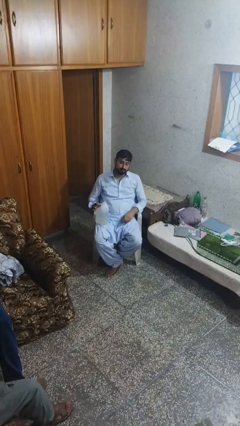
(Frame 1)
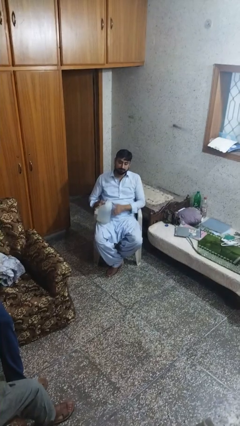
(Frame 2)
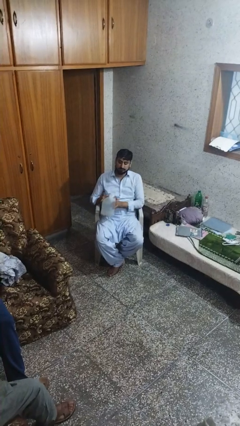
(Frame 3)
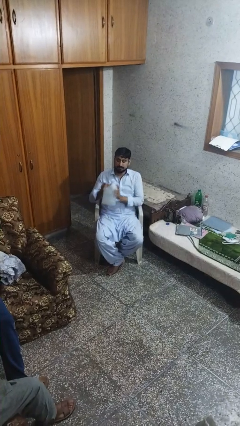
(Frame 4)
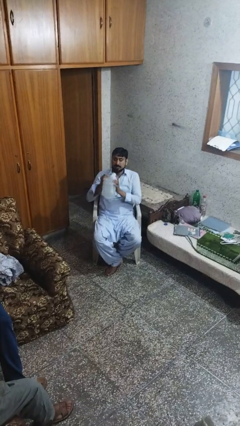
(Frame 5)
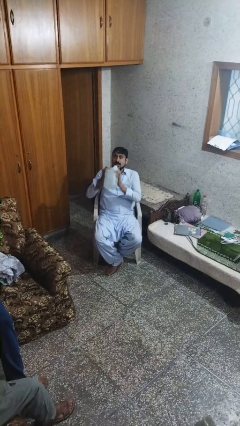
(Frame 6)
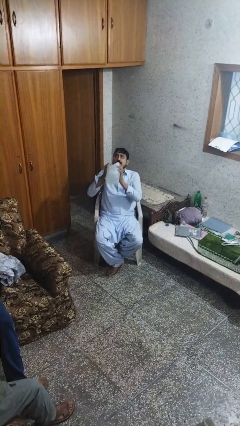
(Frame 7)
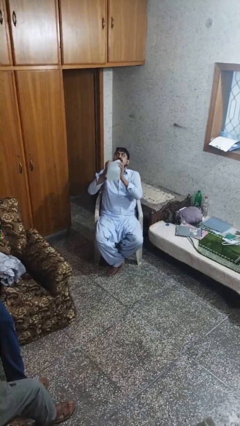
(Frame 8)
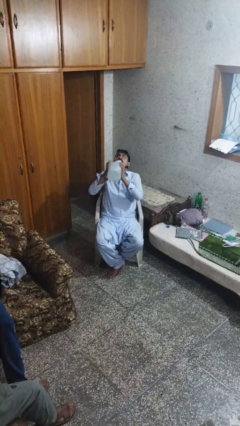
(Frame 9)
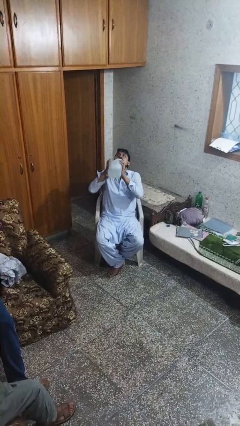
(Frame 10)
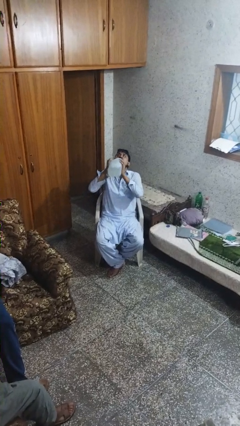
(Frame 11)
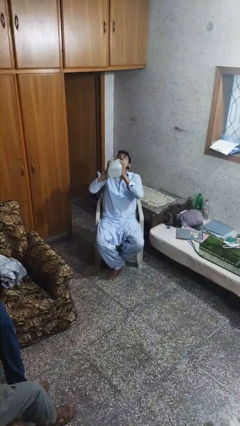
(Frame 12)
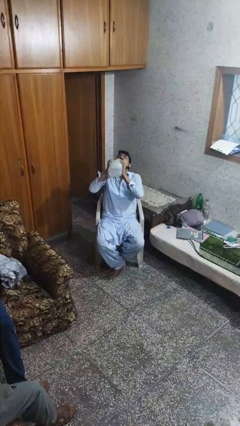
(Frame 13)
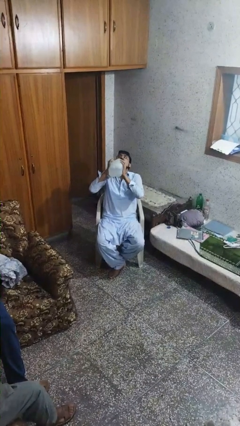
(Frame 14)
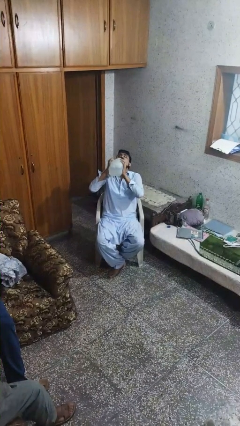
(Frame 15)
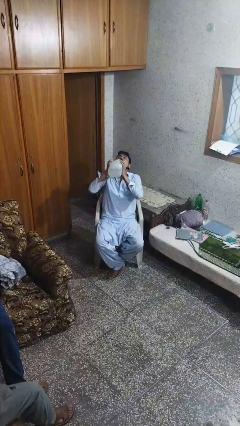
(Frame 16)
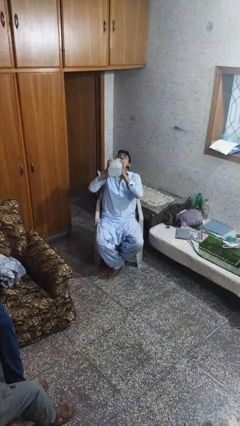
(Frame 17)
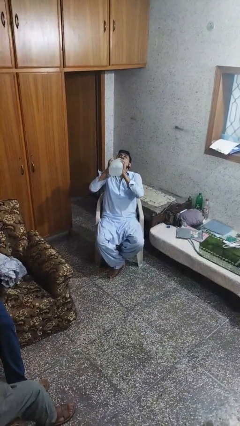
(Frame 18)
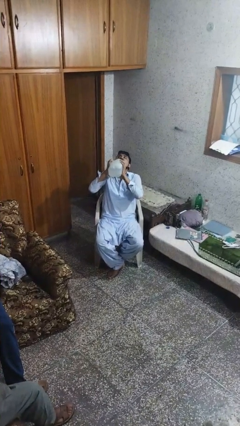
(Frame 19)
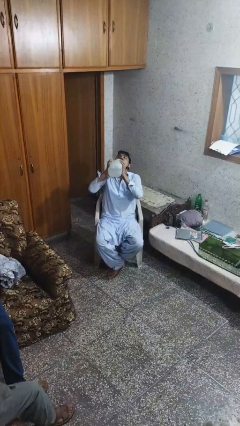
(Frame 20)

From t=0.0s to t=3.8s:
person drinks from bottle

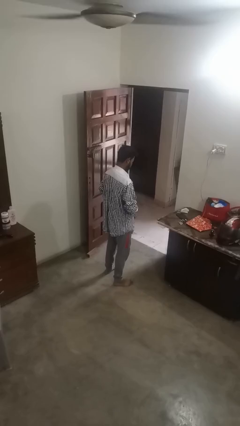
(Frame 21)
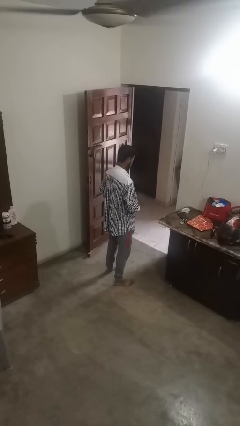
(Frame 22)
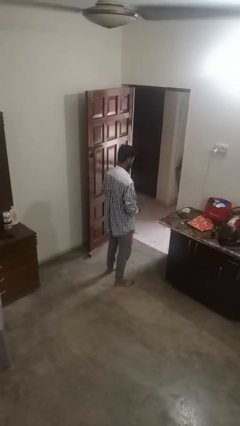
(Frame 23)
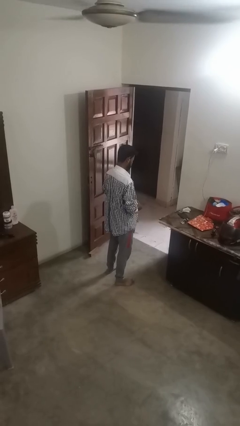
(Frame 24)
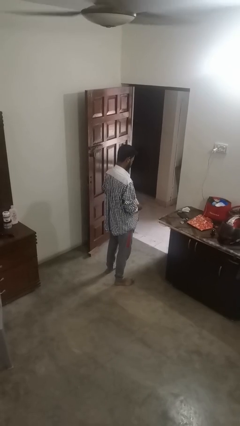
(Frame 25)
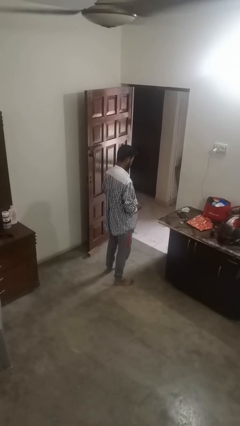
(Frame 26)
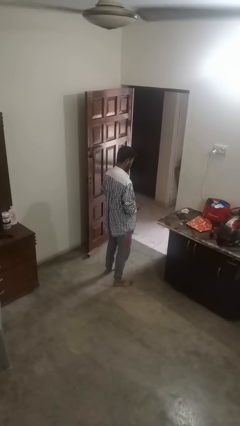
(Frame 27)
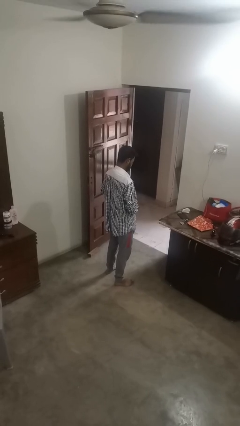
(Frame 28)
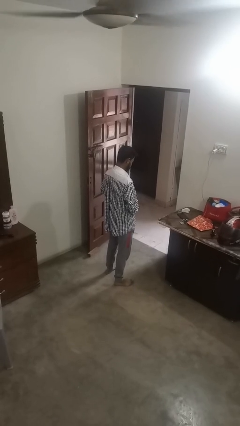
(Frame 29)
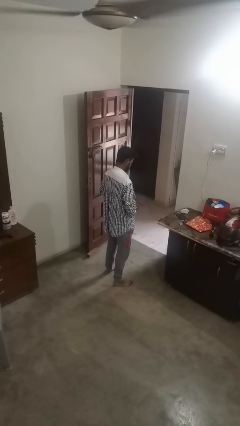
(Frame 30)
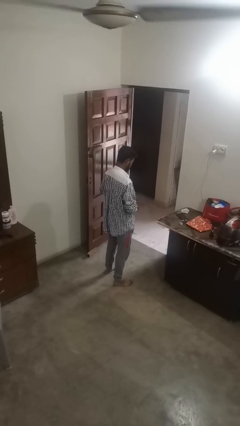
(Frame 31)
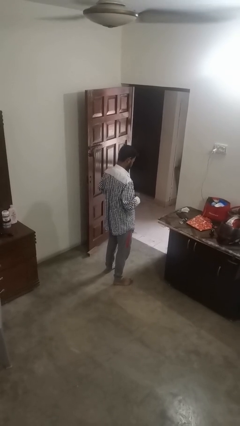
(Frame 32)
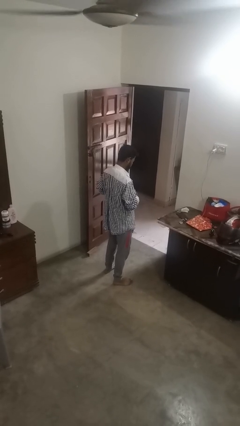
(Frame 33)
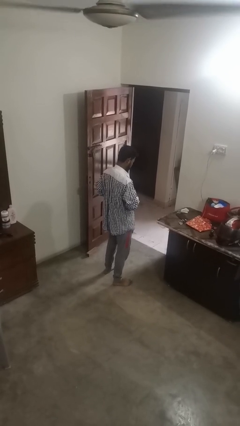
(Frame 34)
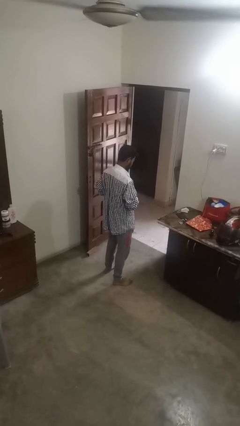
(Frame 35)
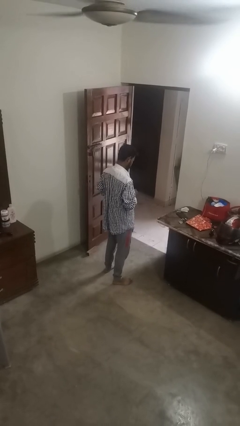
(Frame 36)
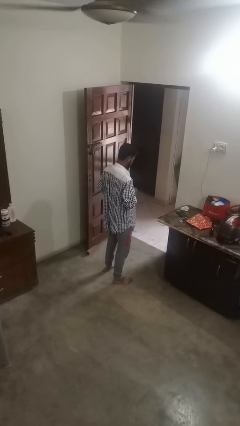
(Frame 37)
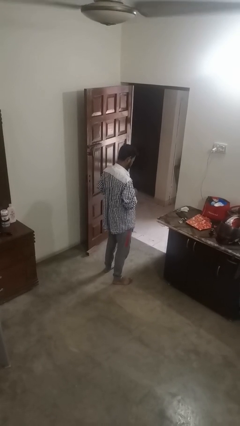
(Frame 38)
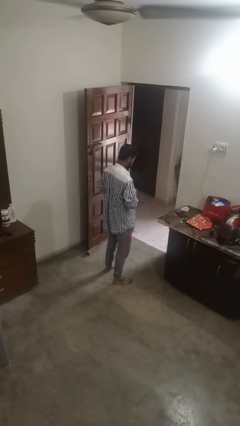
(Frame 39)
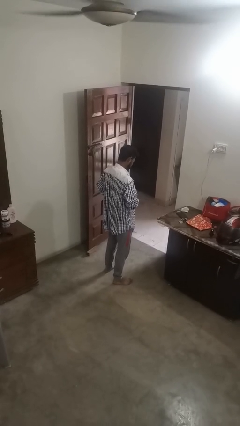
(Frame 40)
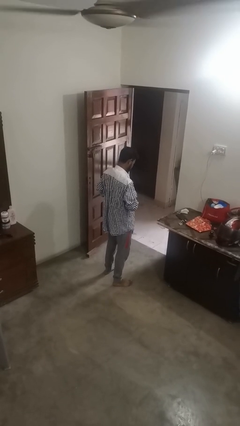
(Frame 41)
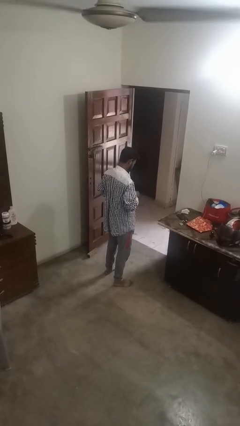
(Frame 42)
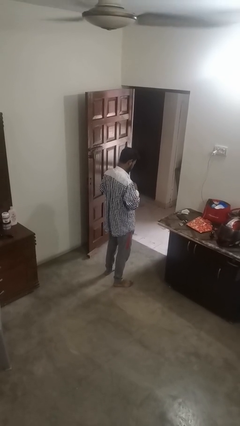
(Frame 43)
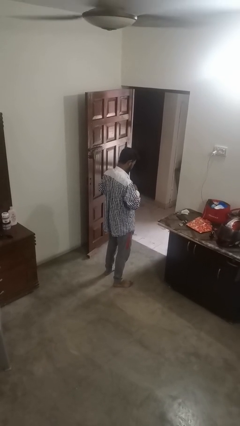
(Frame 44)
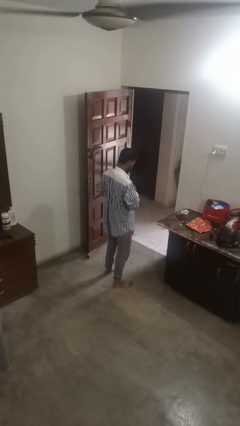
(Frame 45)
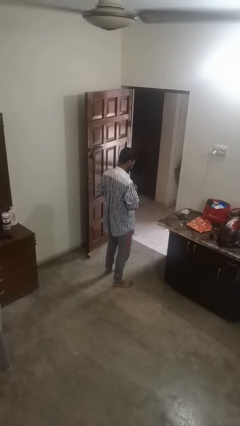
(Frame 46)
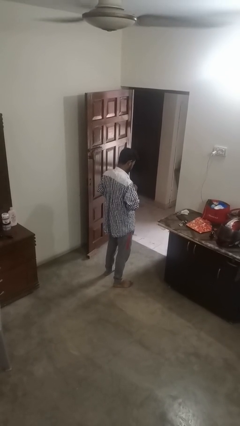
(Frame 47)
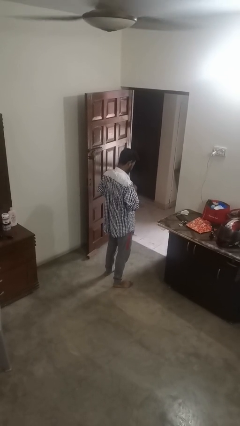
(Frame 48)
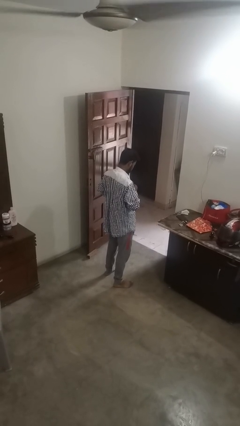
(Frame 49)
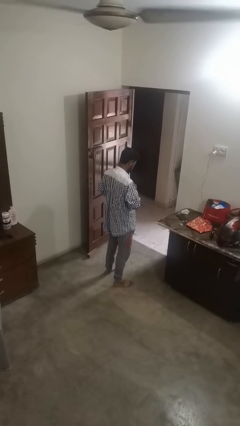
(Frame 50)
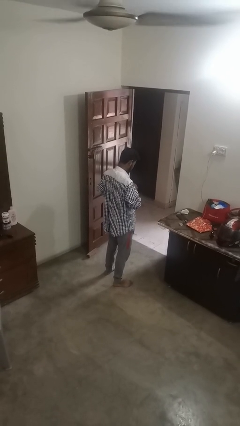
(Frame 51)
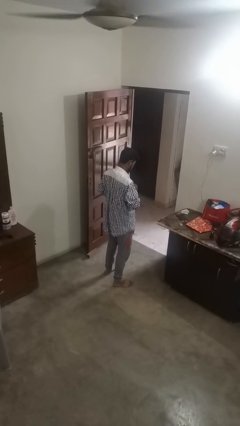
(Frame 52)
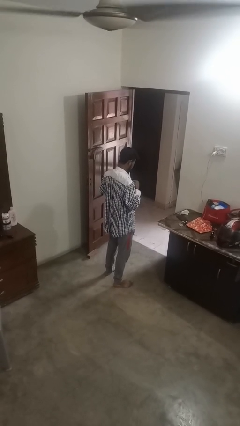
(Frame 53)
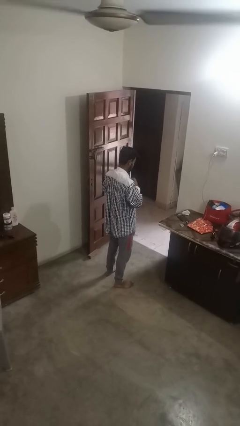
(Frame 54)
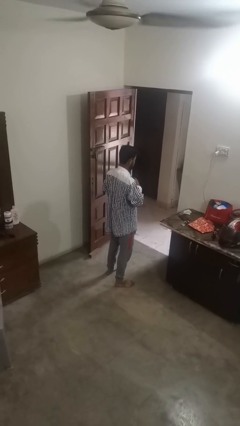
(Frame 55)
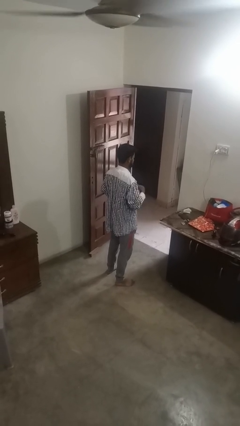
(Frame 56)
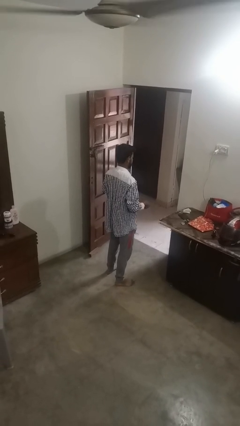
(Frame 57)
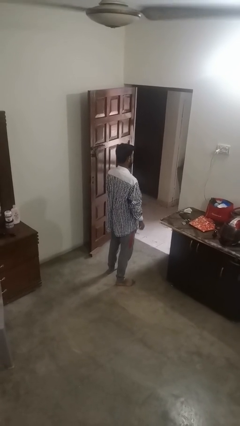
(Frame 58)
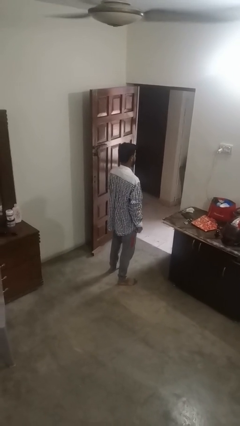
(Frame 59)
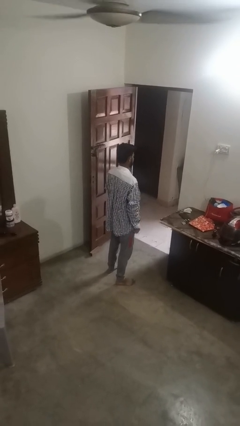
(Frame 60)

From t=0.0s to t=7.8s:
person buttons shirt

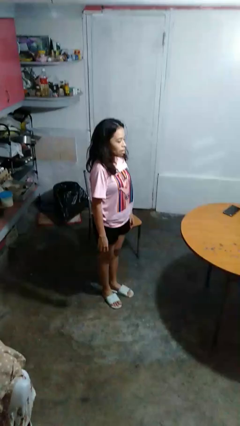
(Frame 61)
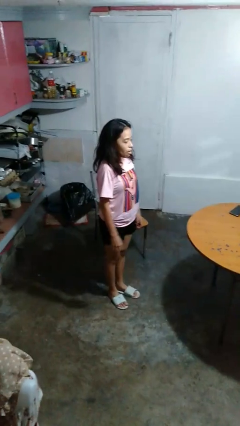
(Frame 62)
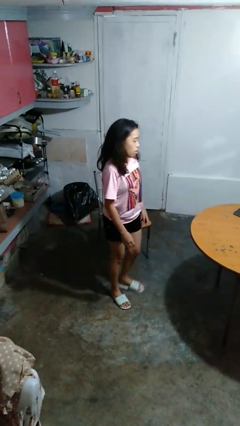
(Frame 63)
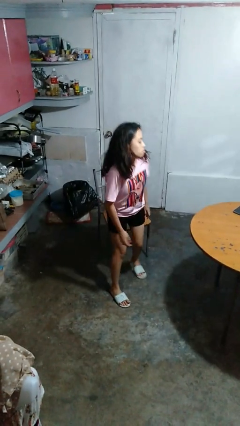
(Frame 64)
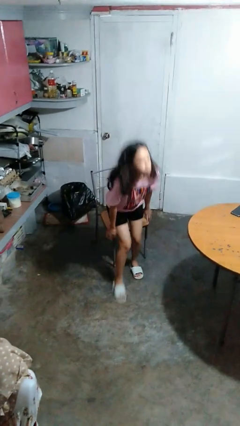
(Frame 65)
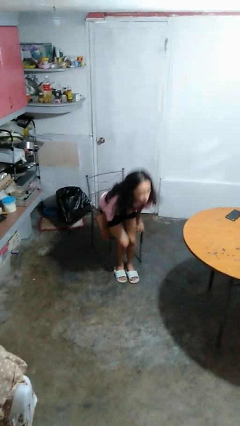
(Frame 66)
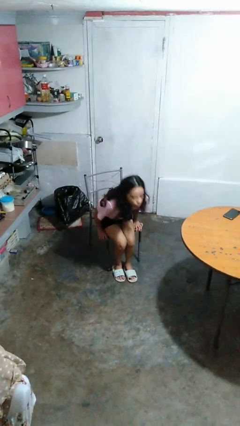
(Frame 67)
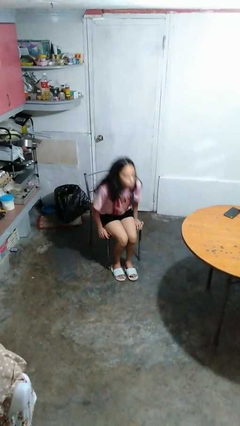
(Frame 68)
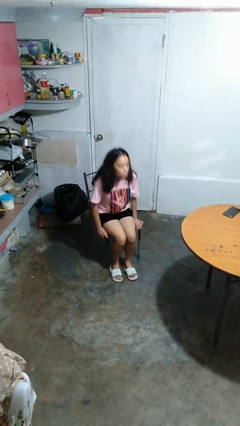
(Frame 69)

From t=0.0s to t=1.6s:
person sits down

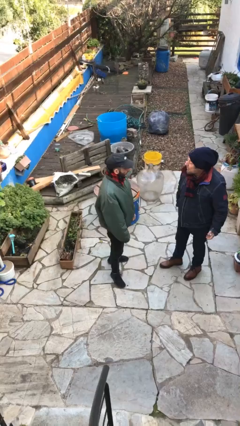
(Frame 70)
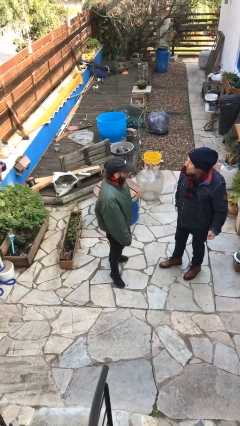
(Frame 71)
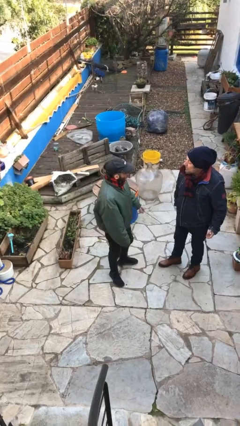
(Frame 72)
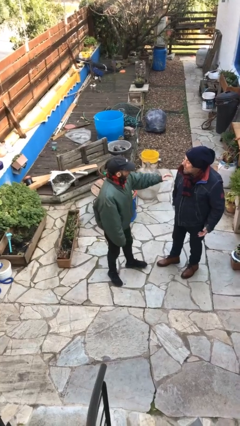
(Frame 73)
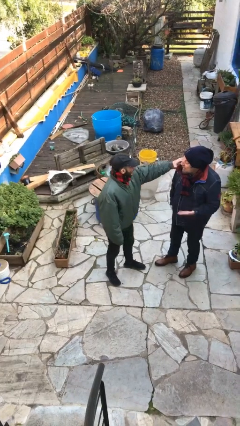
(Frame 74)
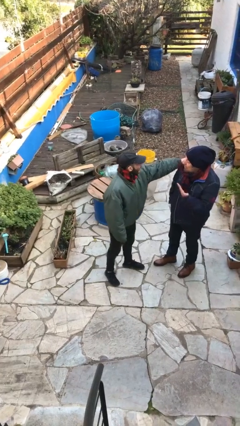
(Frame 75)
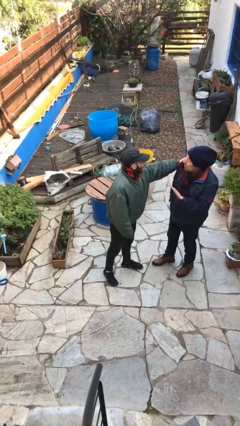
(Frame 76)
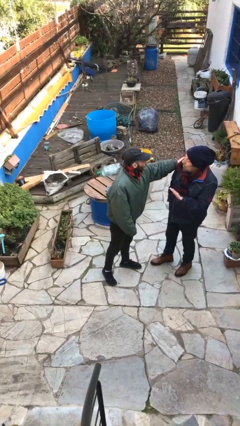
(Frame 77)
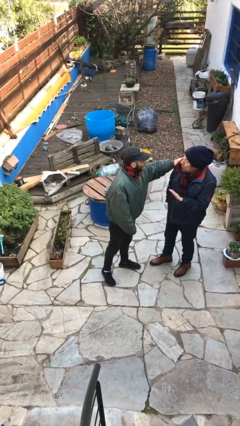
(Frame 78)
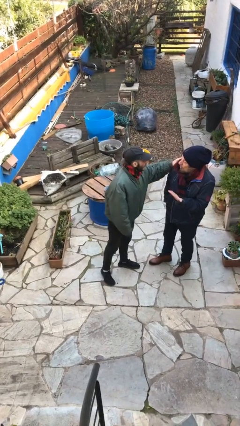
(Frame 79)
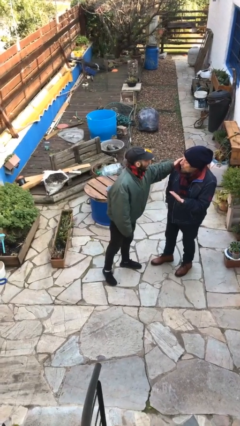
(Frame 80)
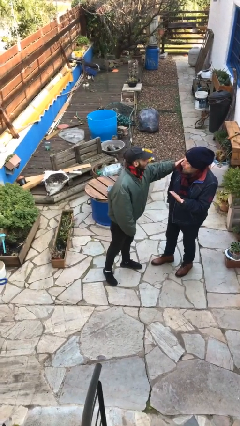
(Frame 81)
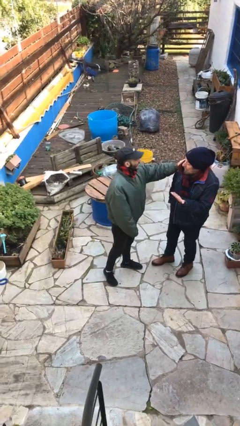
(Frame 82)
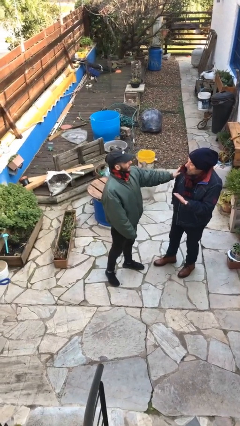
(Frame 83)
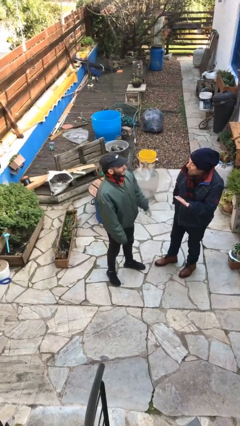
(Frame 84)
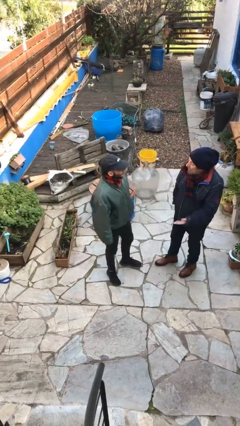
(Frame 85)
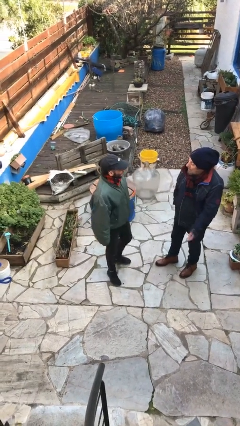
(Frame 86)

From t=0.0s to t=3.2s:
person pounds shoulders of person

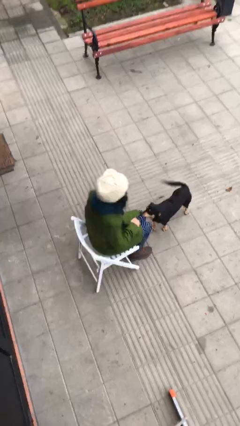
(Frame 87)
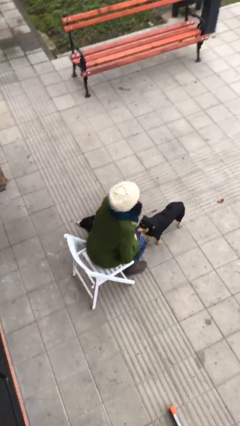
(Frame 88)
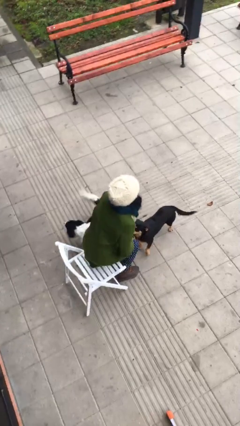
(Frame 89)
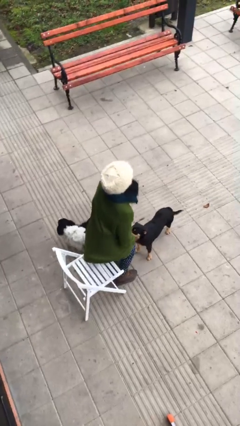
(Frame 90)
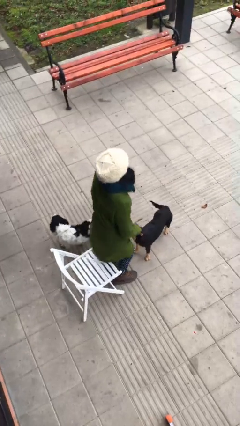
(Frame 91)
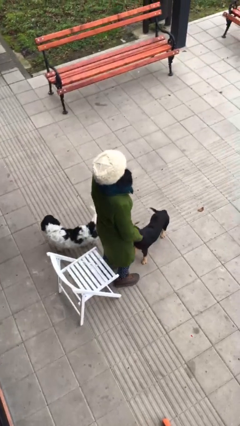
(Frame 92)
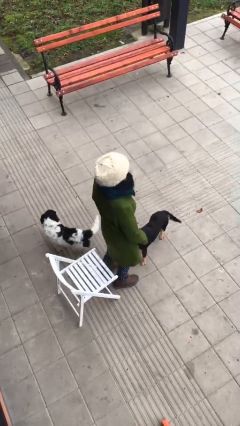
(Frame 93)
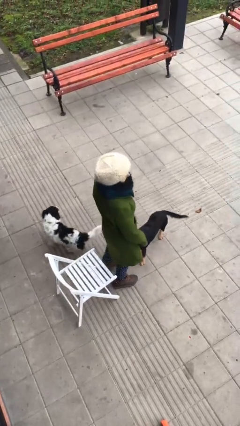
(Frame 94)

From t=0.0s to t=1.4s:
person stands up

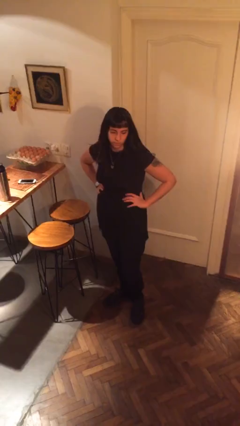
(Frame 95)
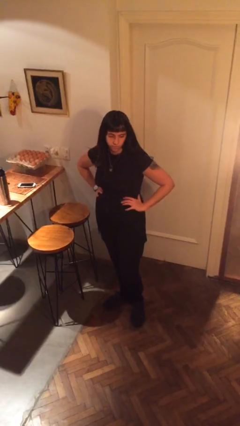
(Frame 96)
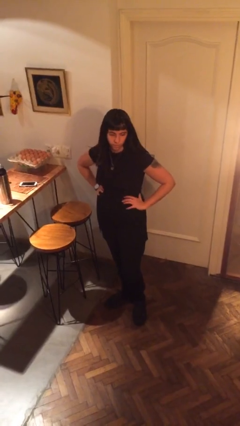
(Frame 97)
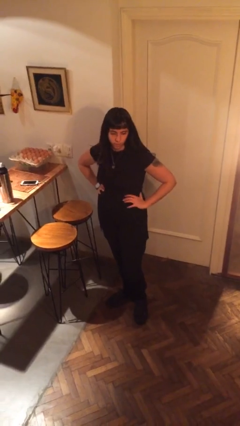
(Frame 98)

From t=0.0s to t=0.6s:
person looks at wristwatch
